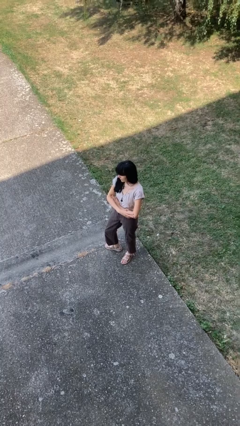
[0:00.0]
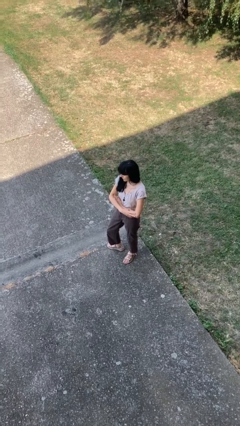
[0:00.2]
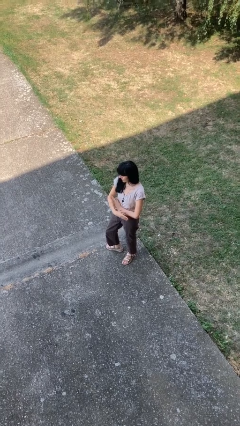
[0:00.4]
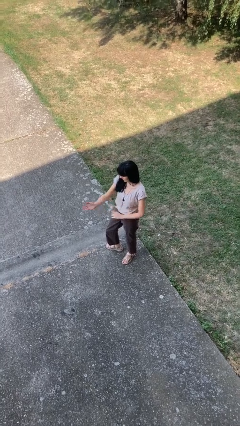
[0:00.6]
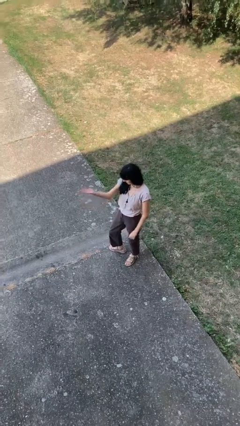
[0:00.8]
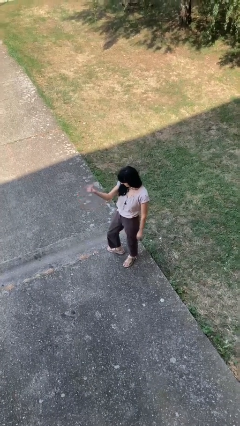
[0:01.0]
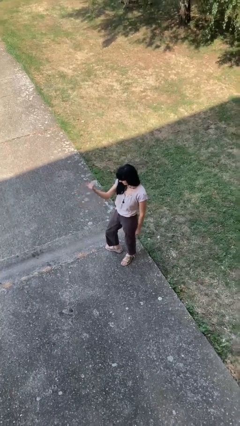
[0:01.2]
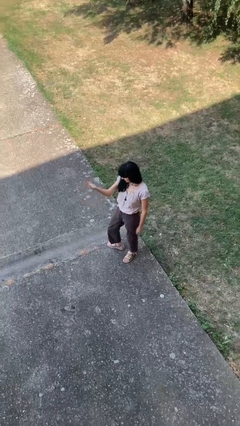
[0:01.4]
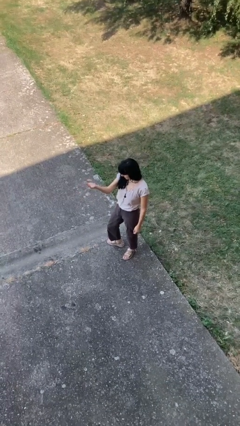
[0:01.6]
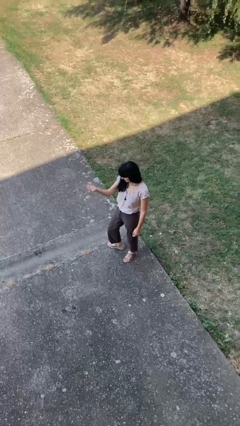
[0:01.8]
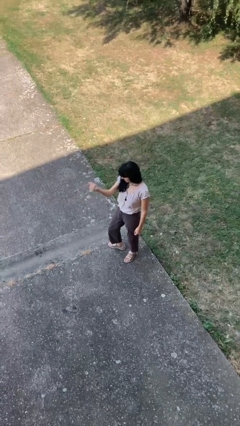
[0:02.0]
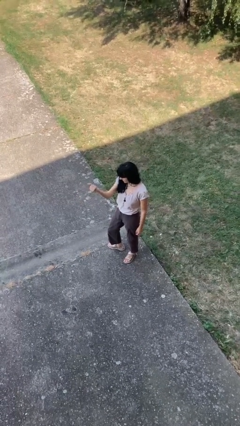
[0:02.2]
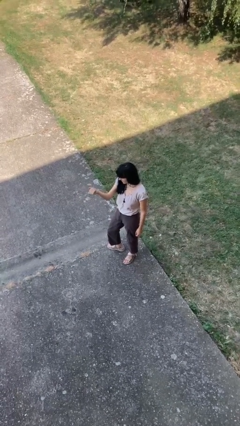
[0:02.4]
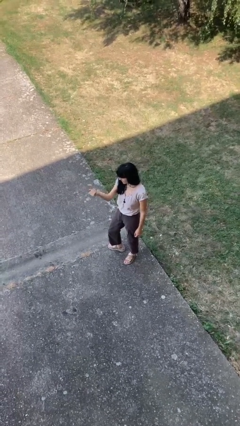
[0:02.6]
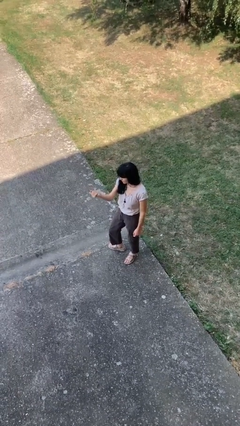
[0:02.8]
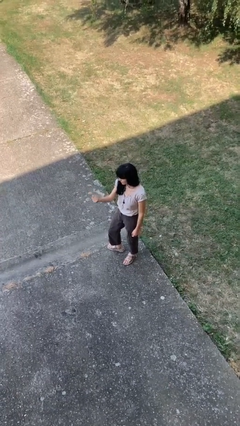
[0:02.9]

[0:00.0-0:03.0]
person gestures come here

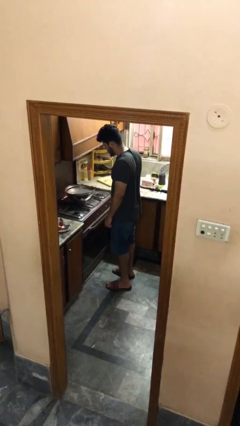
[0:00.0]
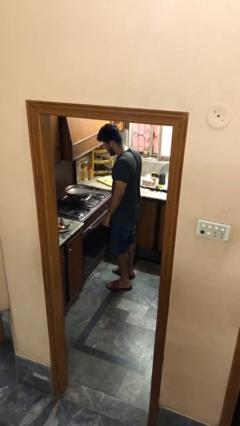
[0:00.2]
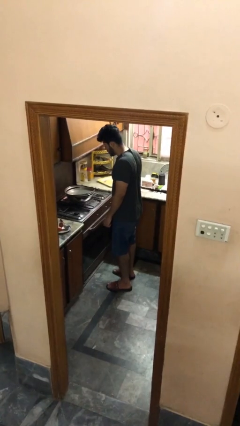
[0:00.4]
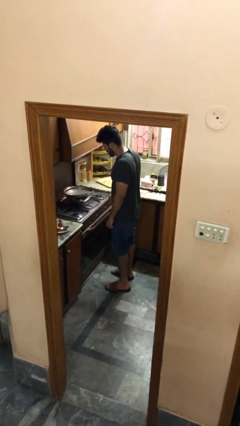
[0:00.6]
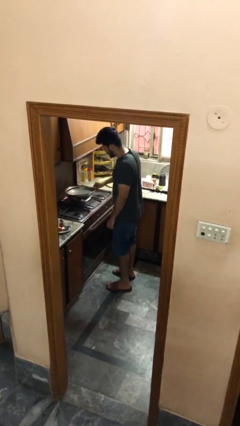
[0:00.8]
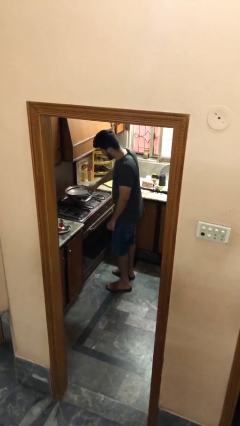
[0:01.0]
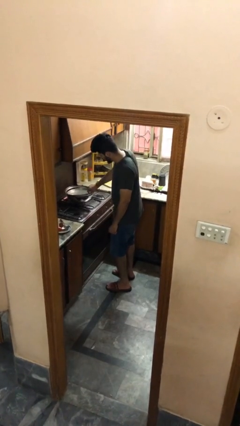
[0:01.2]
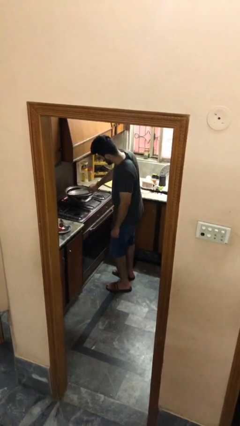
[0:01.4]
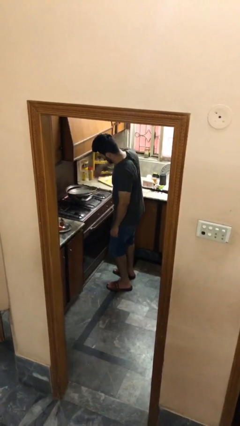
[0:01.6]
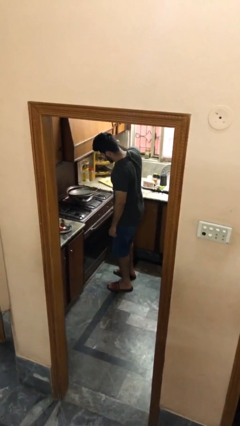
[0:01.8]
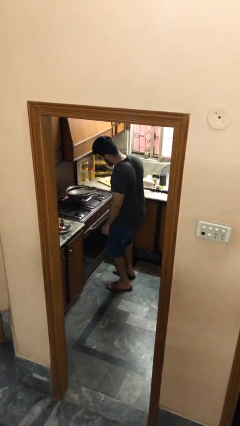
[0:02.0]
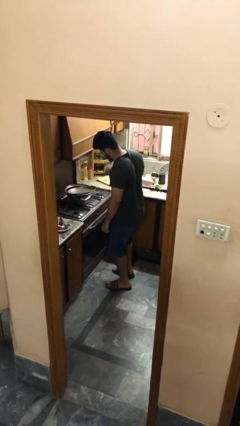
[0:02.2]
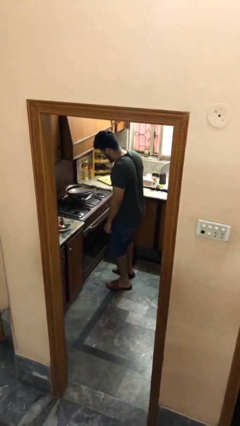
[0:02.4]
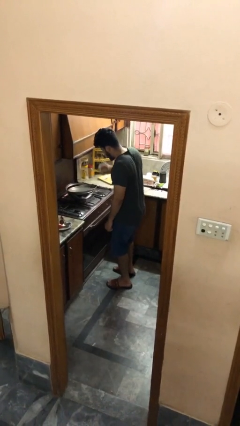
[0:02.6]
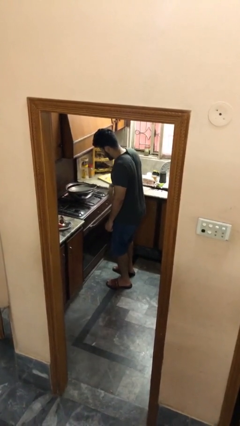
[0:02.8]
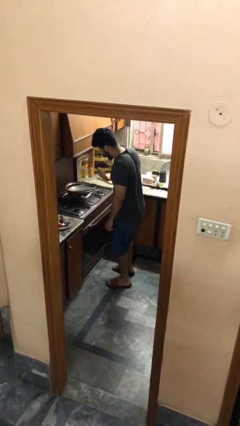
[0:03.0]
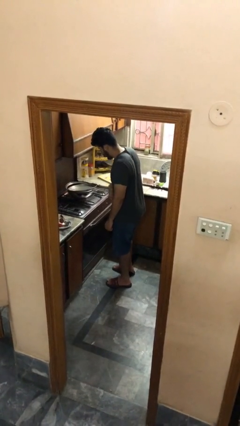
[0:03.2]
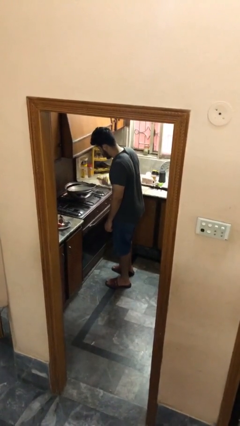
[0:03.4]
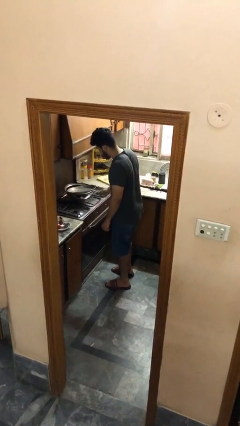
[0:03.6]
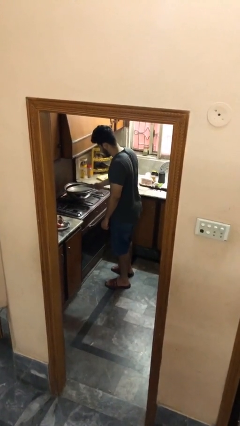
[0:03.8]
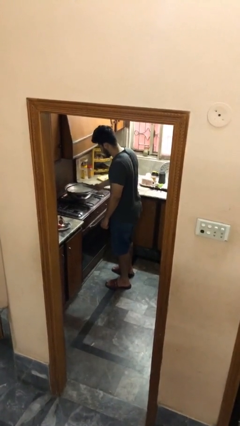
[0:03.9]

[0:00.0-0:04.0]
person burns hand

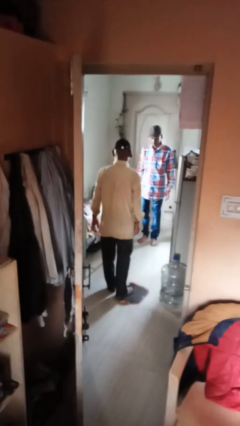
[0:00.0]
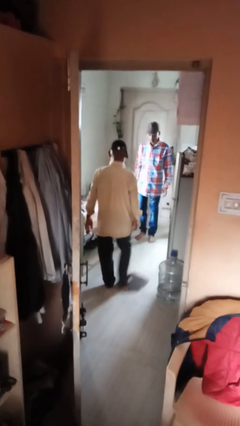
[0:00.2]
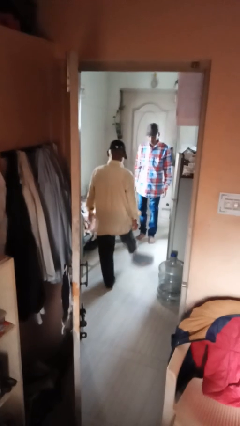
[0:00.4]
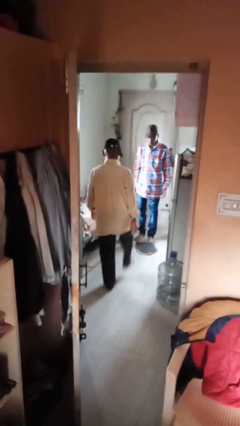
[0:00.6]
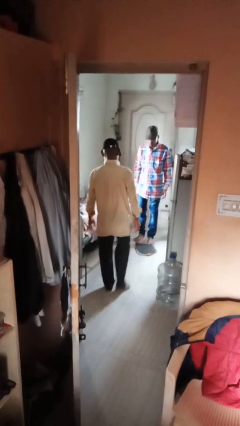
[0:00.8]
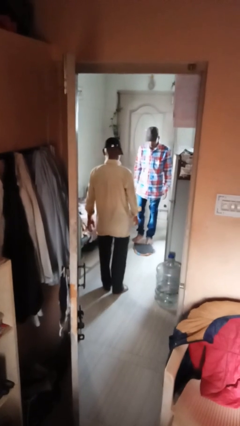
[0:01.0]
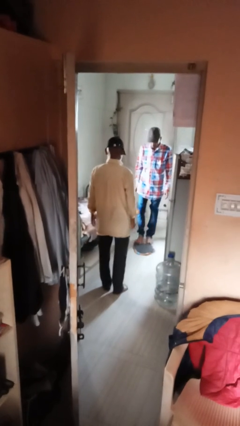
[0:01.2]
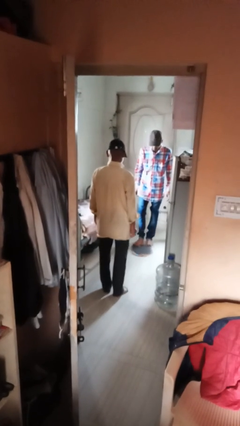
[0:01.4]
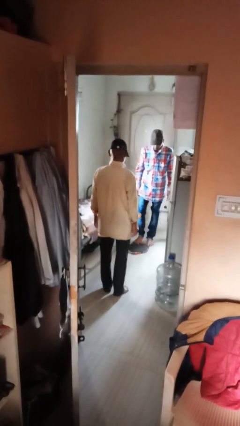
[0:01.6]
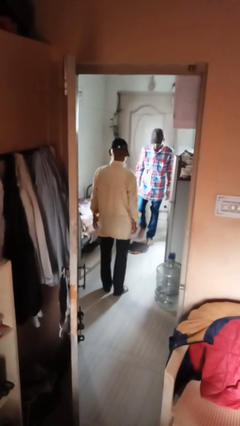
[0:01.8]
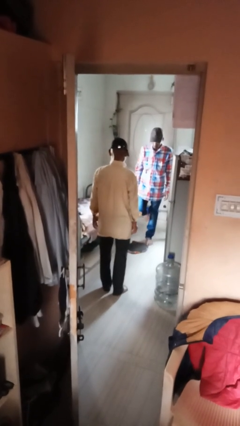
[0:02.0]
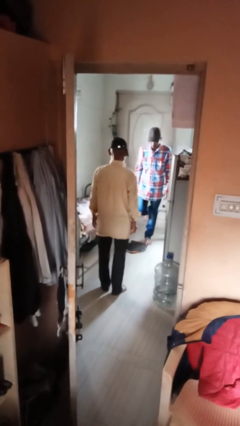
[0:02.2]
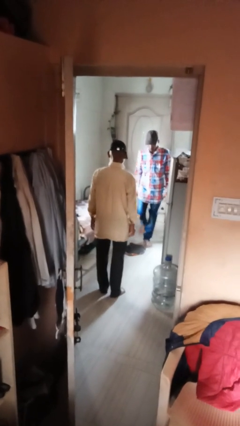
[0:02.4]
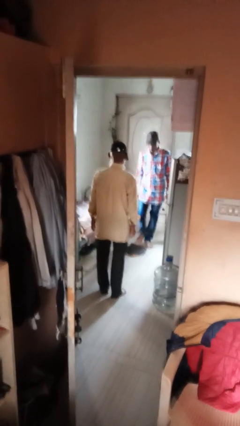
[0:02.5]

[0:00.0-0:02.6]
person kicks object to person

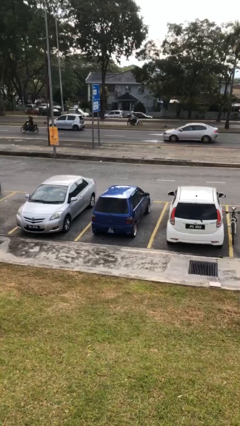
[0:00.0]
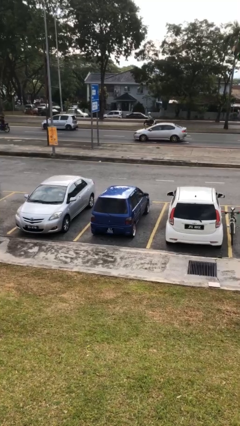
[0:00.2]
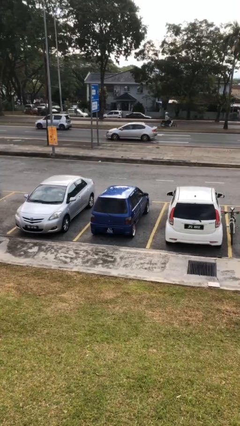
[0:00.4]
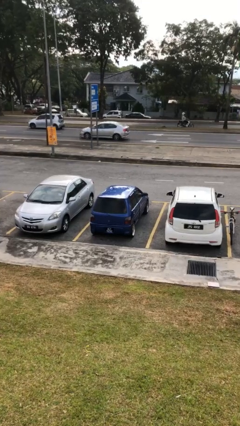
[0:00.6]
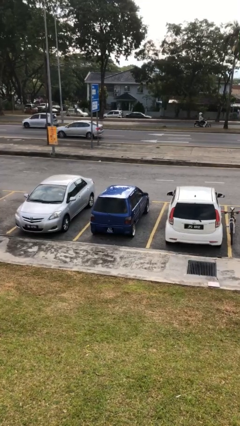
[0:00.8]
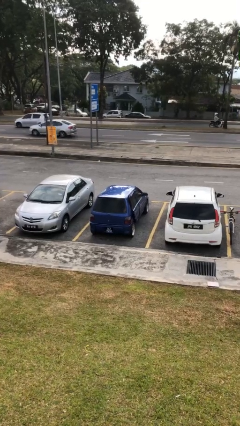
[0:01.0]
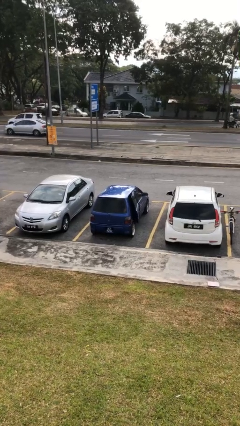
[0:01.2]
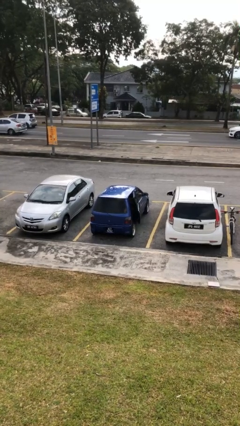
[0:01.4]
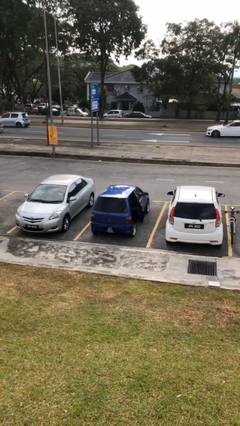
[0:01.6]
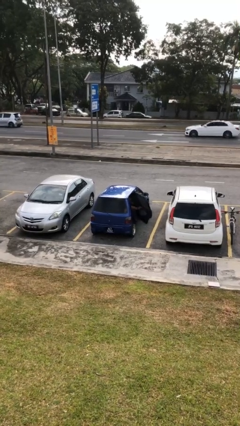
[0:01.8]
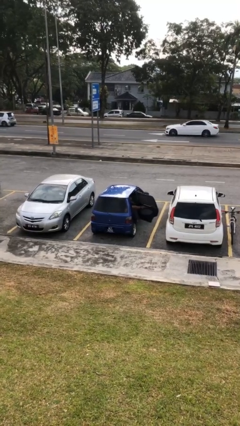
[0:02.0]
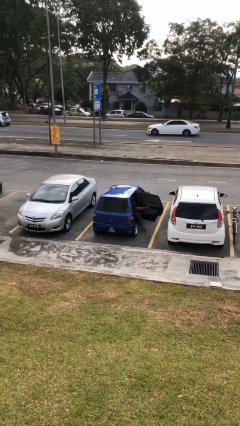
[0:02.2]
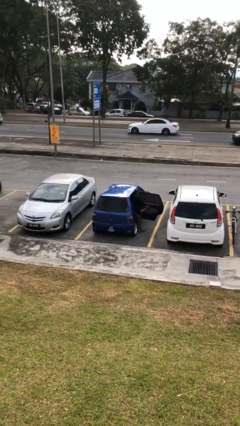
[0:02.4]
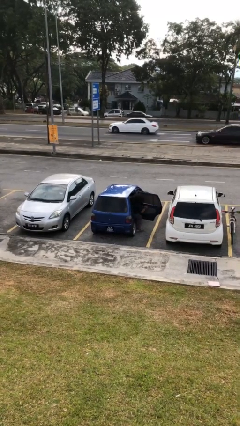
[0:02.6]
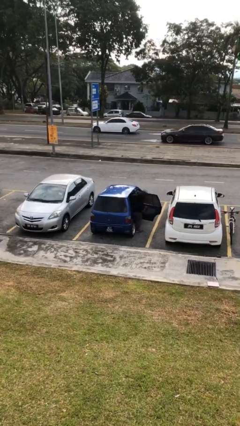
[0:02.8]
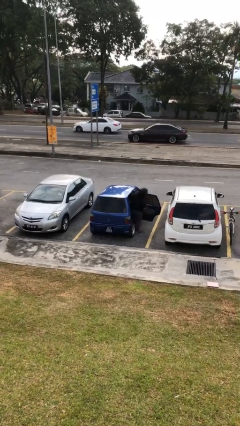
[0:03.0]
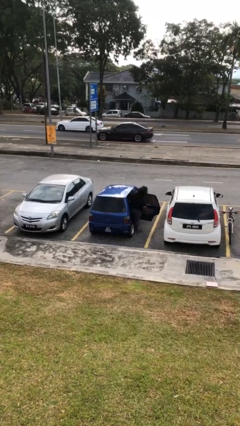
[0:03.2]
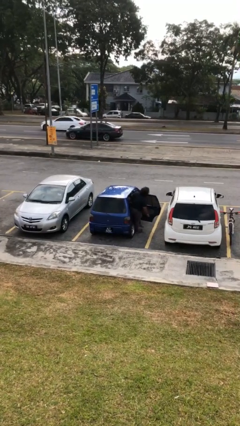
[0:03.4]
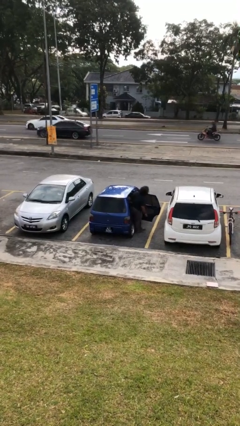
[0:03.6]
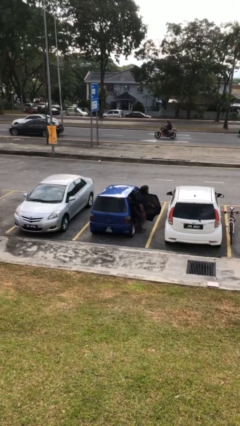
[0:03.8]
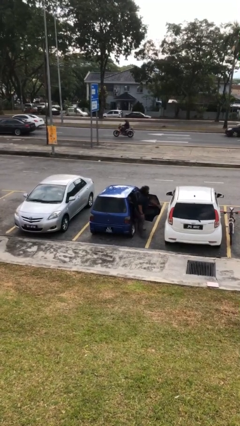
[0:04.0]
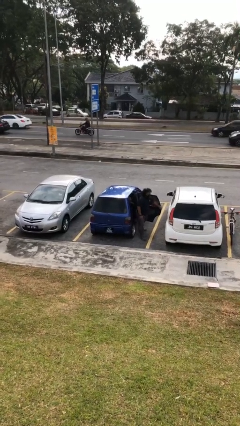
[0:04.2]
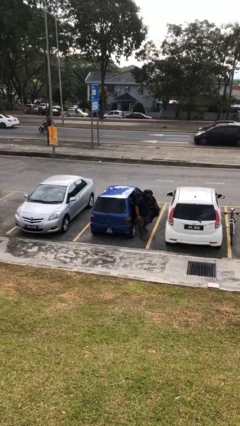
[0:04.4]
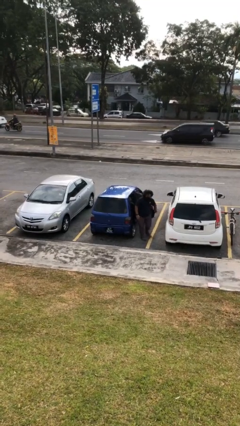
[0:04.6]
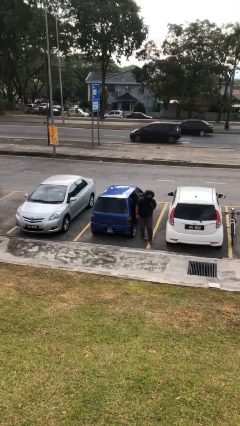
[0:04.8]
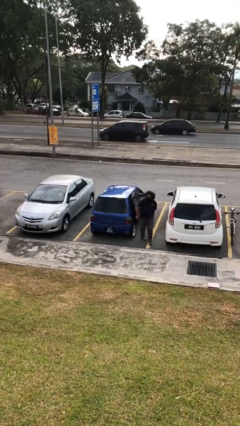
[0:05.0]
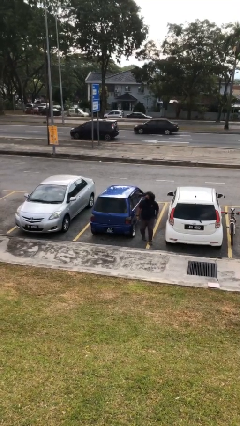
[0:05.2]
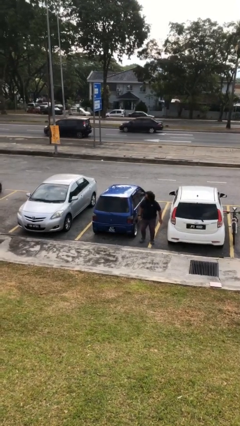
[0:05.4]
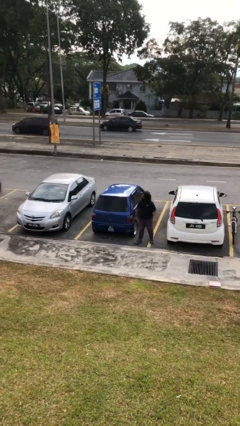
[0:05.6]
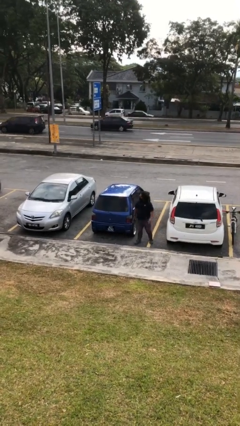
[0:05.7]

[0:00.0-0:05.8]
car drops off person

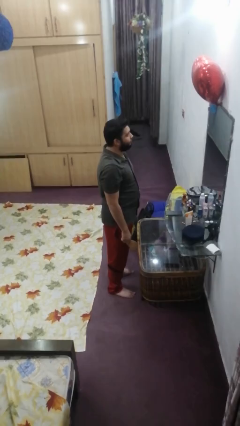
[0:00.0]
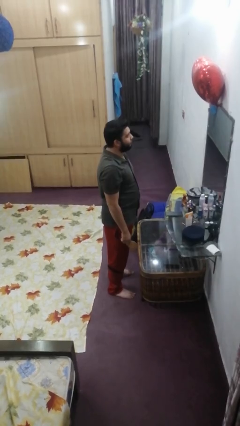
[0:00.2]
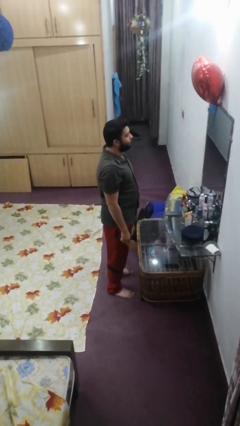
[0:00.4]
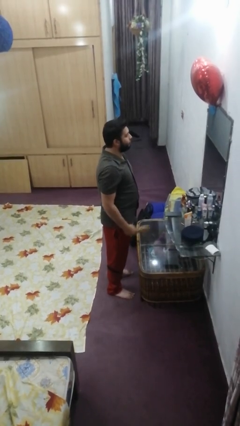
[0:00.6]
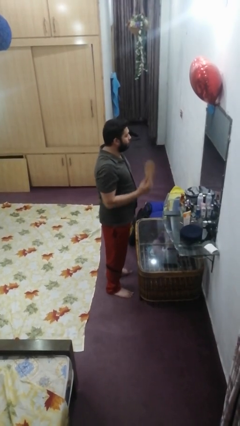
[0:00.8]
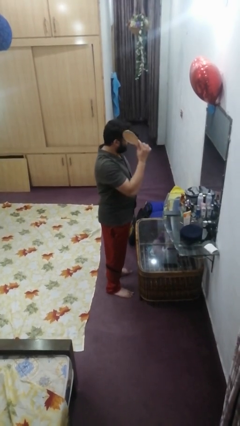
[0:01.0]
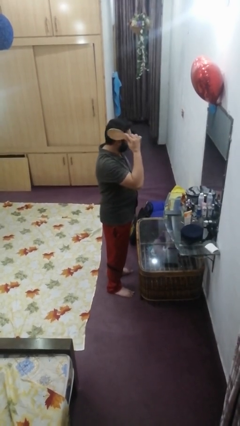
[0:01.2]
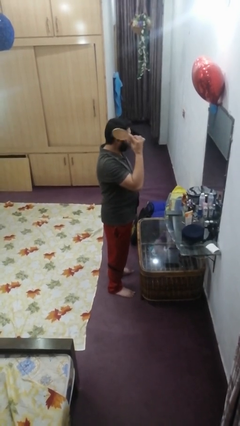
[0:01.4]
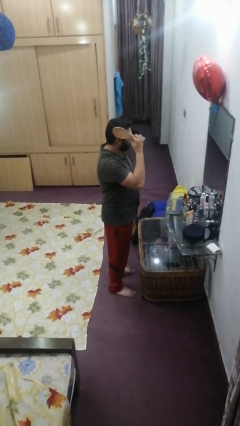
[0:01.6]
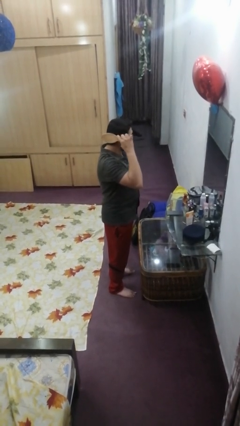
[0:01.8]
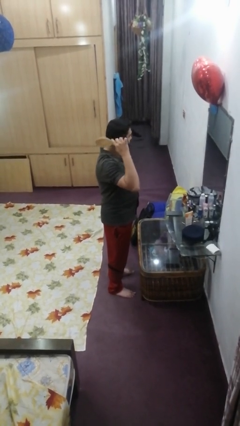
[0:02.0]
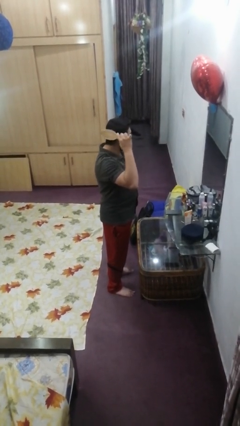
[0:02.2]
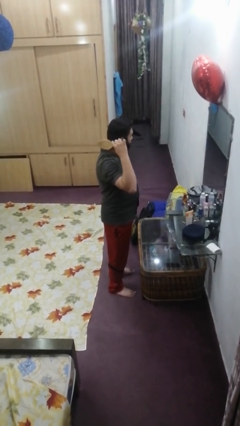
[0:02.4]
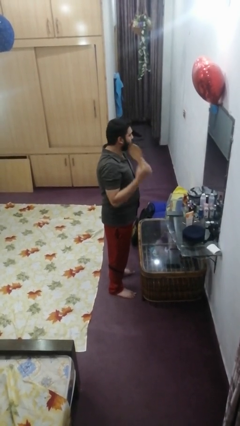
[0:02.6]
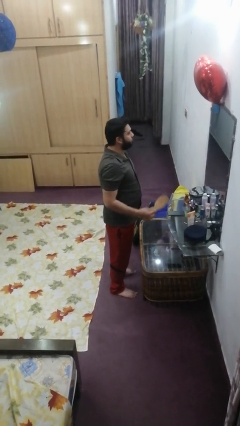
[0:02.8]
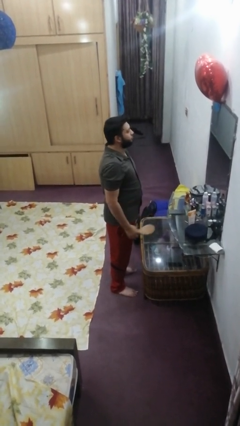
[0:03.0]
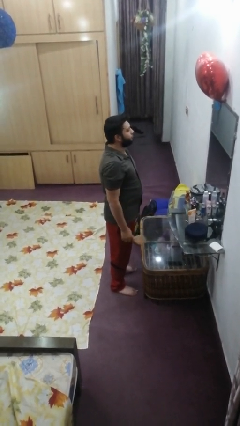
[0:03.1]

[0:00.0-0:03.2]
person brushes hair
